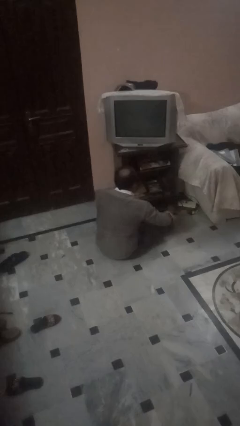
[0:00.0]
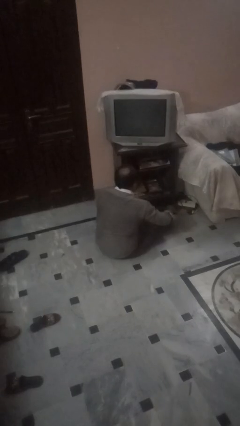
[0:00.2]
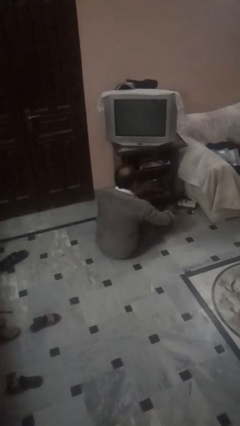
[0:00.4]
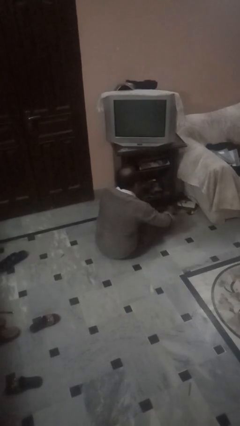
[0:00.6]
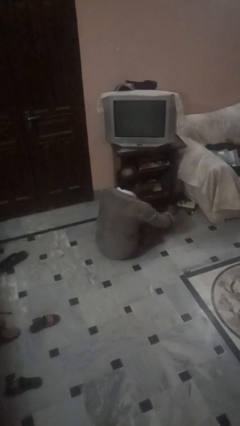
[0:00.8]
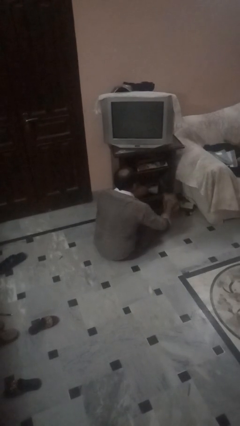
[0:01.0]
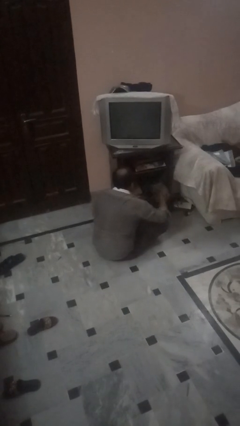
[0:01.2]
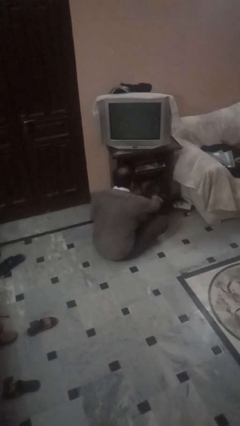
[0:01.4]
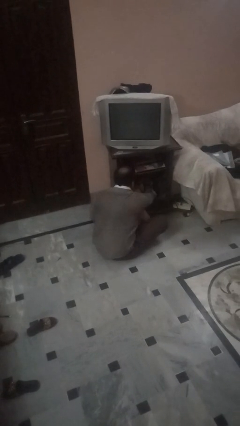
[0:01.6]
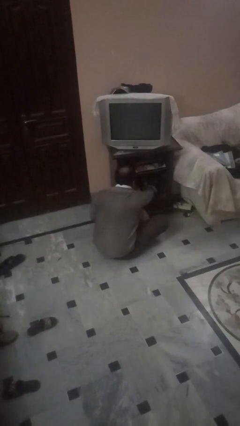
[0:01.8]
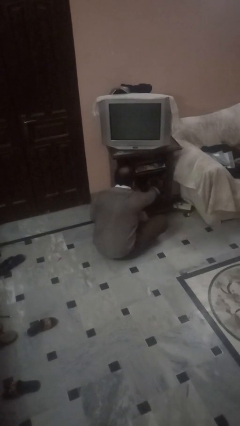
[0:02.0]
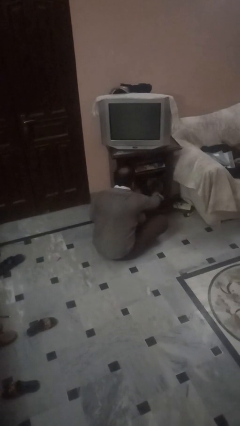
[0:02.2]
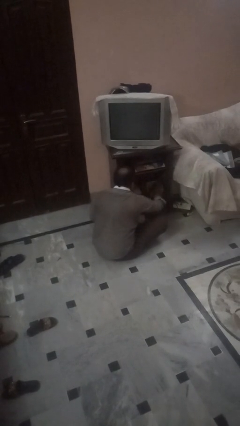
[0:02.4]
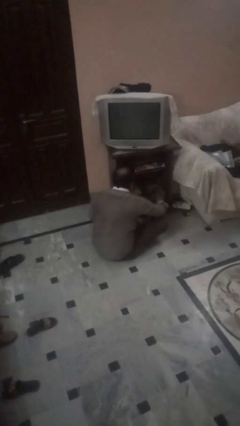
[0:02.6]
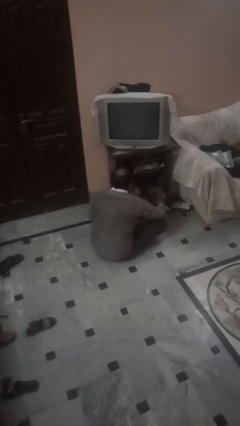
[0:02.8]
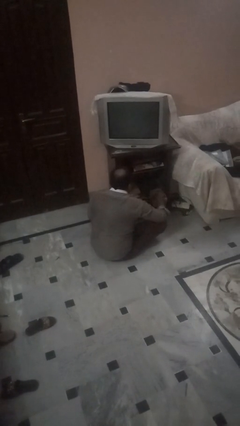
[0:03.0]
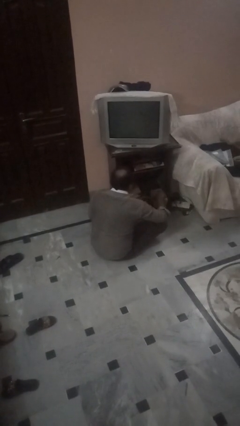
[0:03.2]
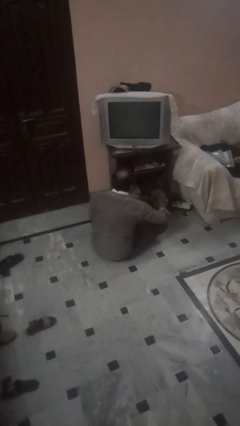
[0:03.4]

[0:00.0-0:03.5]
person dusts furniture

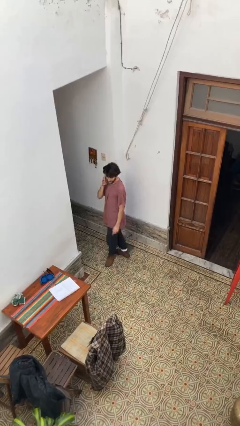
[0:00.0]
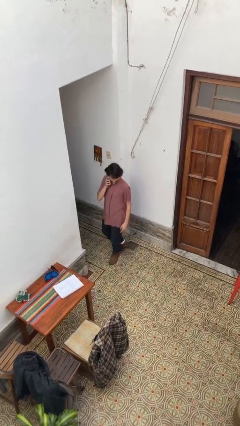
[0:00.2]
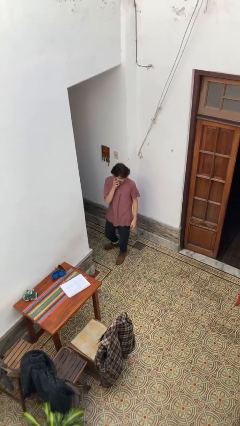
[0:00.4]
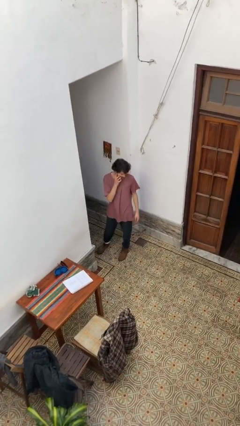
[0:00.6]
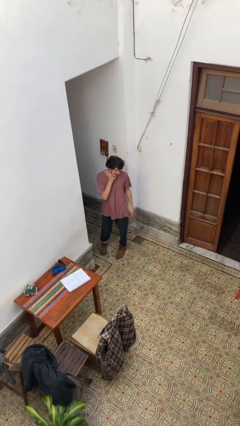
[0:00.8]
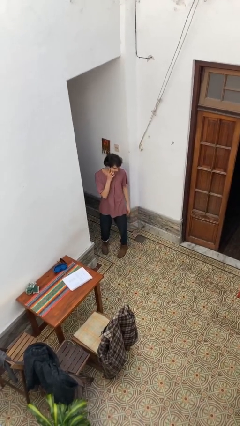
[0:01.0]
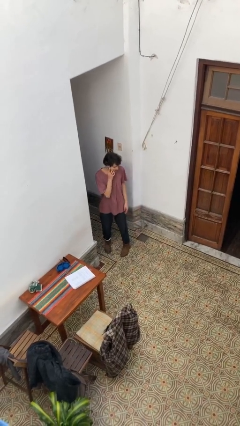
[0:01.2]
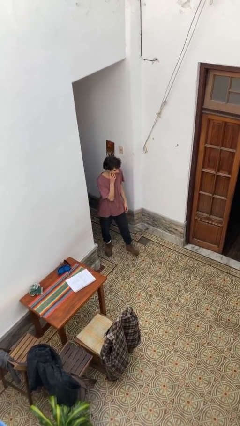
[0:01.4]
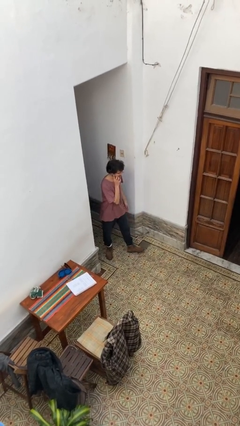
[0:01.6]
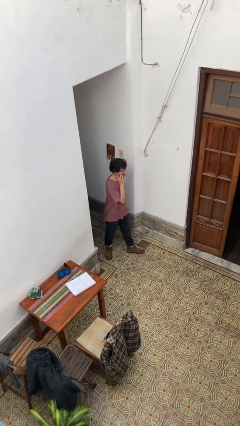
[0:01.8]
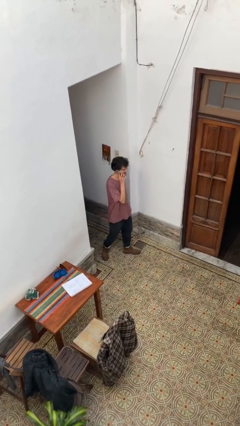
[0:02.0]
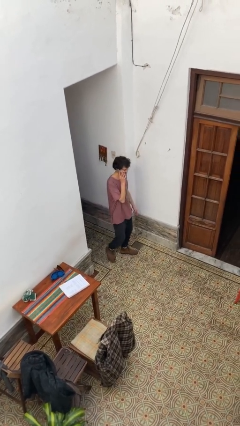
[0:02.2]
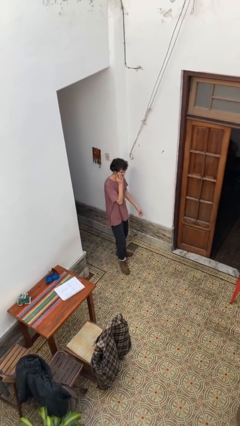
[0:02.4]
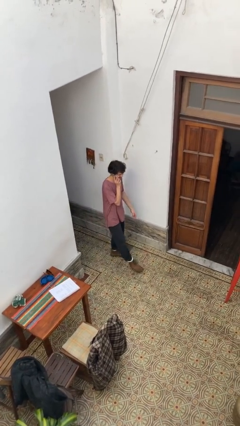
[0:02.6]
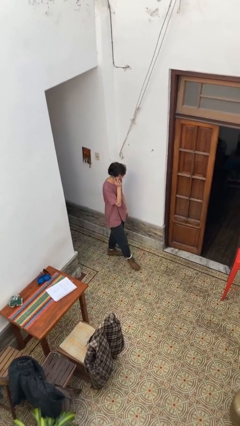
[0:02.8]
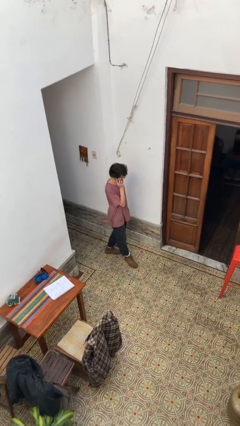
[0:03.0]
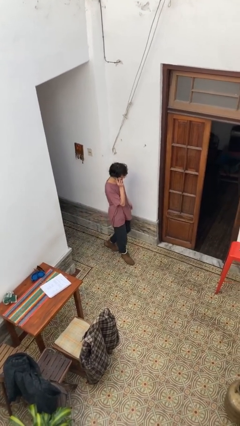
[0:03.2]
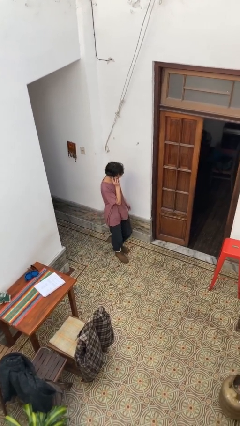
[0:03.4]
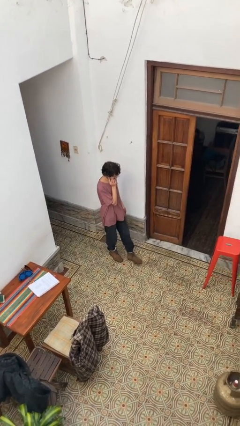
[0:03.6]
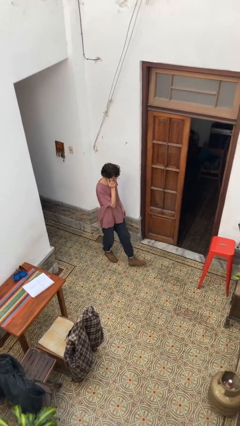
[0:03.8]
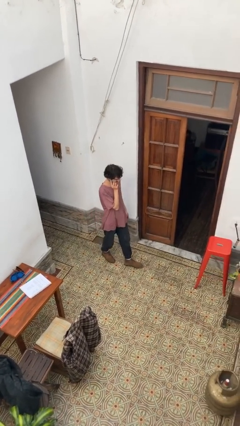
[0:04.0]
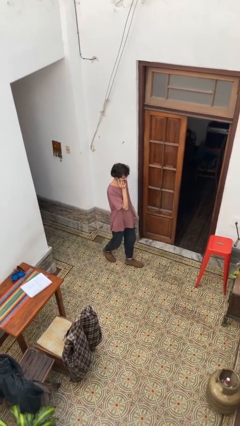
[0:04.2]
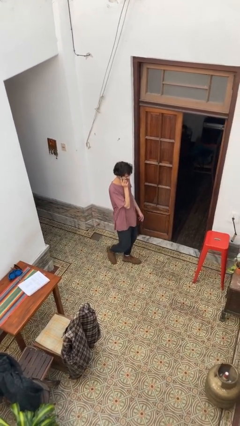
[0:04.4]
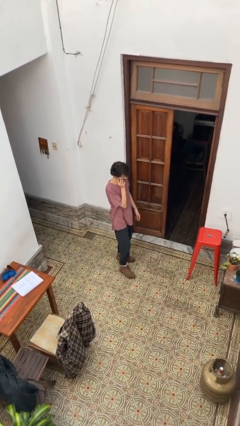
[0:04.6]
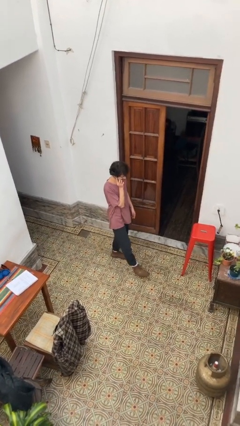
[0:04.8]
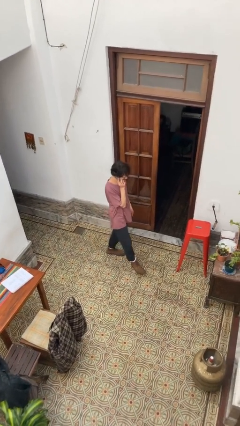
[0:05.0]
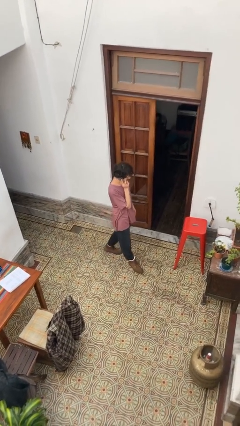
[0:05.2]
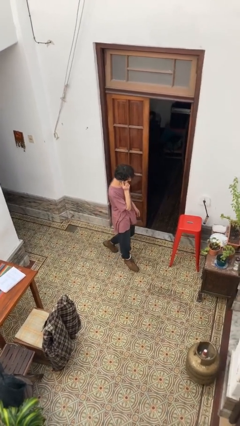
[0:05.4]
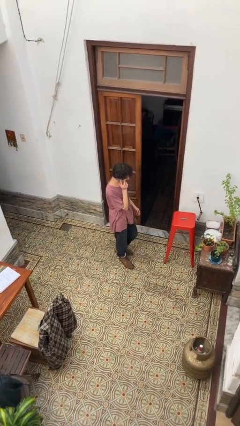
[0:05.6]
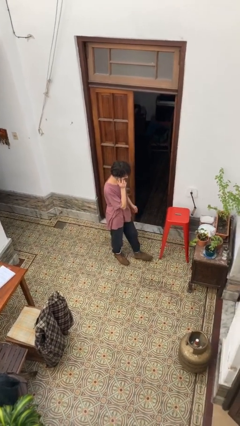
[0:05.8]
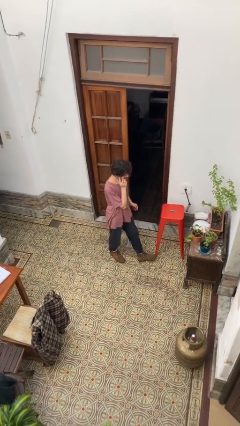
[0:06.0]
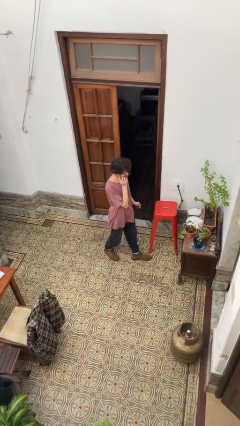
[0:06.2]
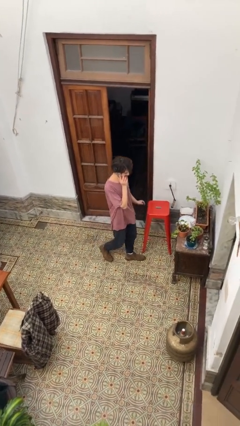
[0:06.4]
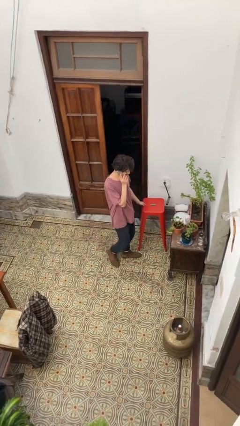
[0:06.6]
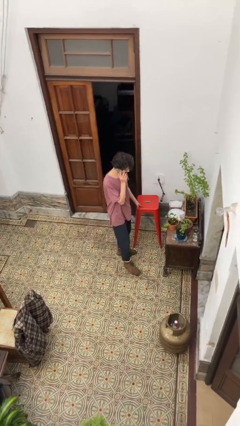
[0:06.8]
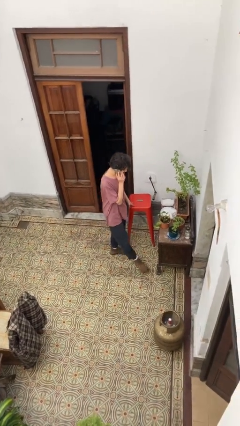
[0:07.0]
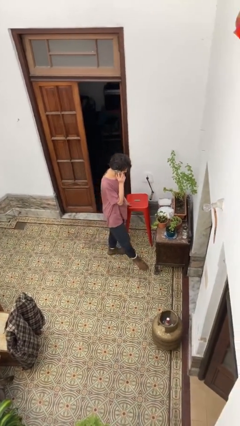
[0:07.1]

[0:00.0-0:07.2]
person talks on phone

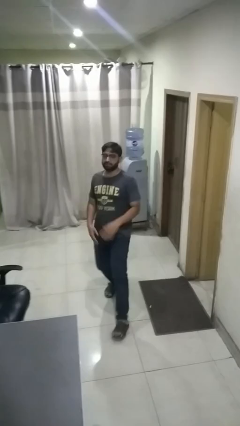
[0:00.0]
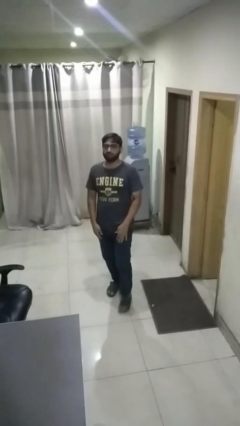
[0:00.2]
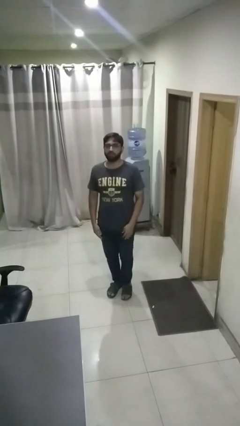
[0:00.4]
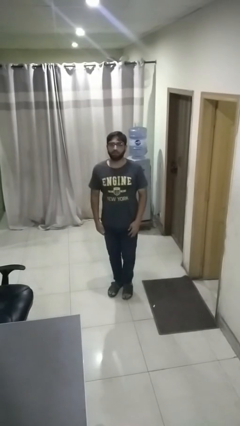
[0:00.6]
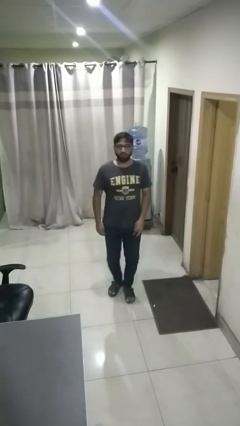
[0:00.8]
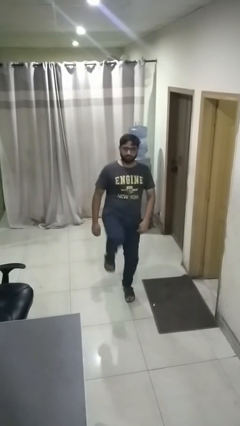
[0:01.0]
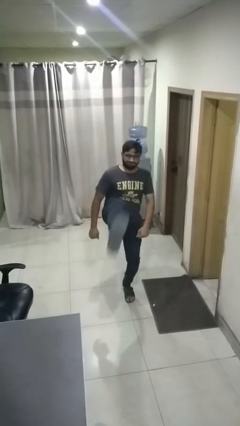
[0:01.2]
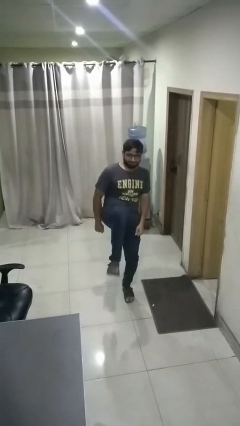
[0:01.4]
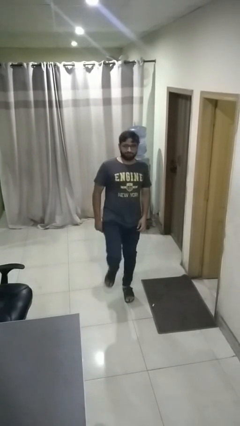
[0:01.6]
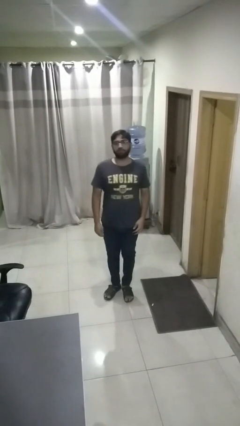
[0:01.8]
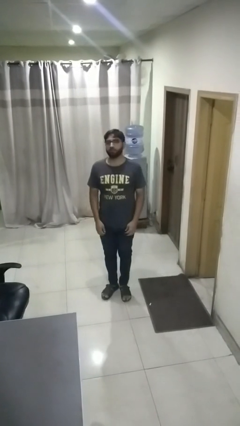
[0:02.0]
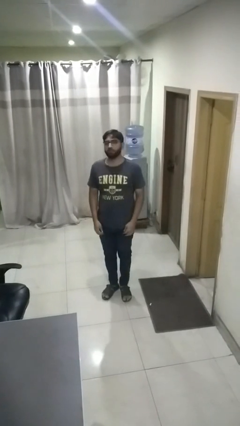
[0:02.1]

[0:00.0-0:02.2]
person karate kicks

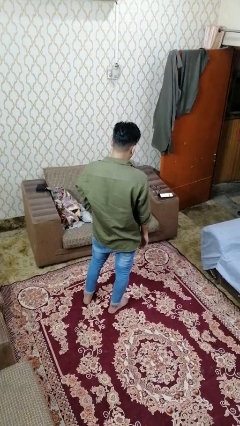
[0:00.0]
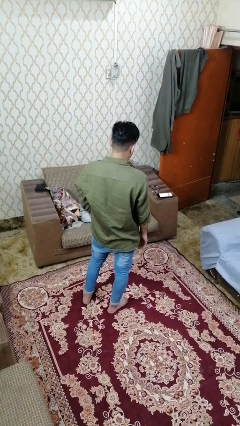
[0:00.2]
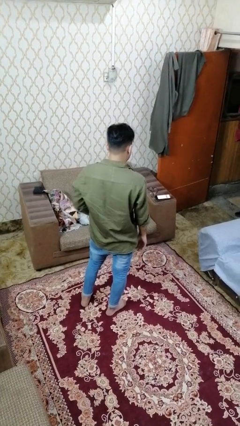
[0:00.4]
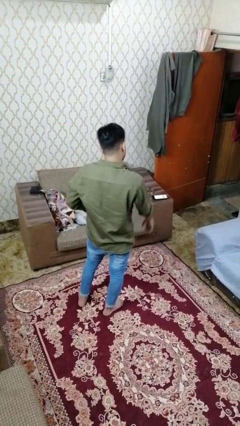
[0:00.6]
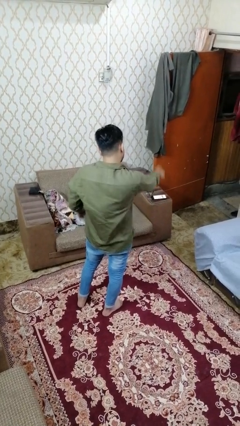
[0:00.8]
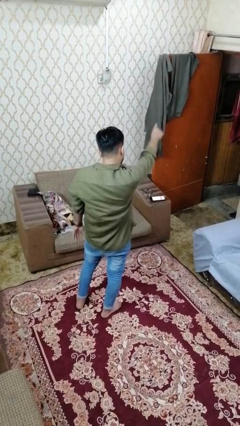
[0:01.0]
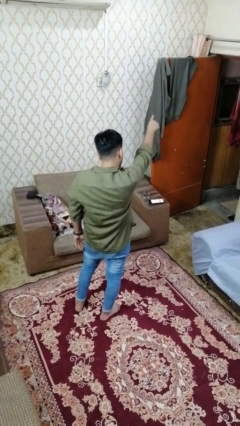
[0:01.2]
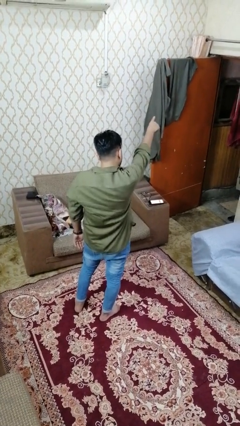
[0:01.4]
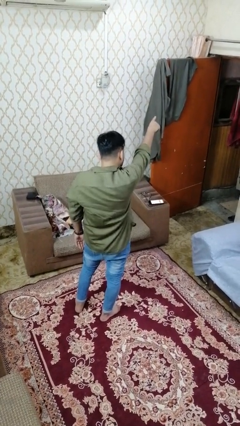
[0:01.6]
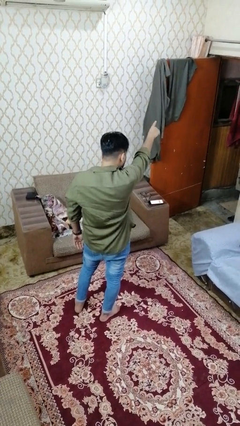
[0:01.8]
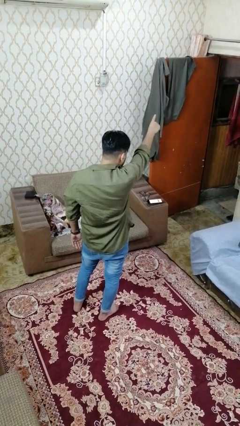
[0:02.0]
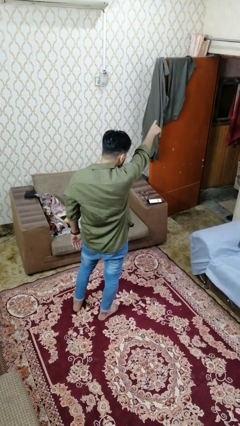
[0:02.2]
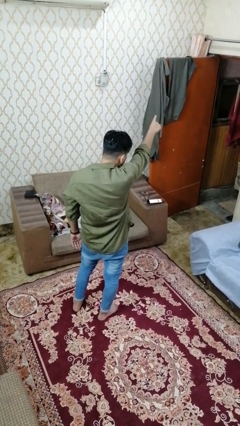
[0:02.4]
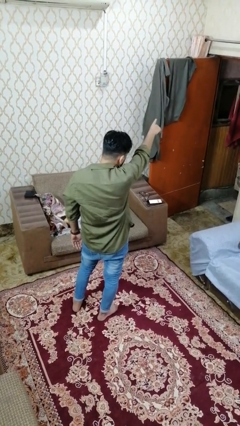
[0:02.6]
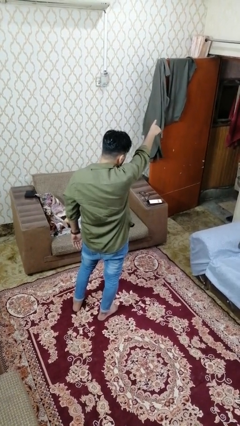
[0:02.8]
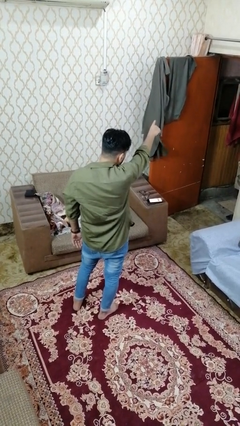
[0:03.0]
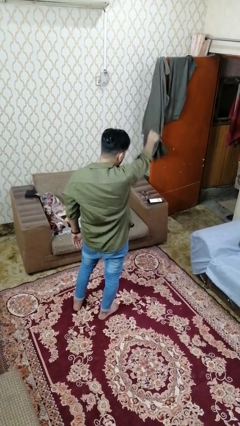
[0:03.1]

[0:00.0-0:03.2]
person points at person

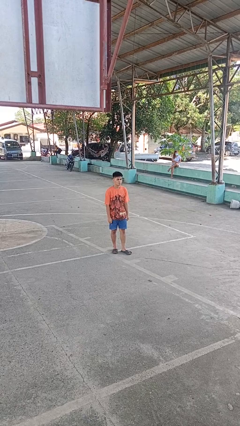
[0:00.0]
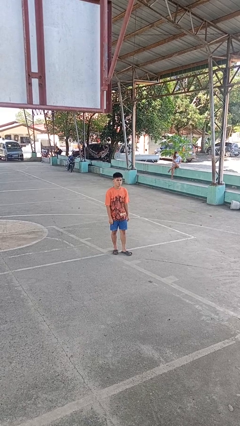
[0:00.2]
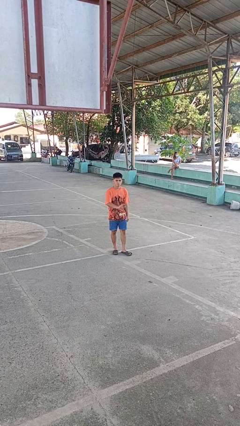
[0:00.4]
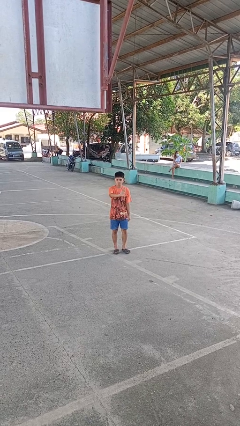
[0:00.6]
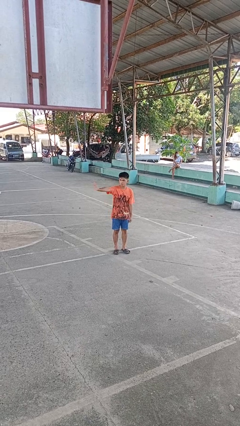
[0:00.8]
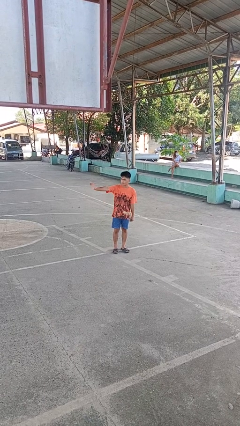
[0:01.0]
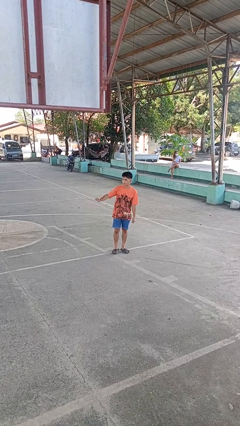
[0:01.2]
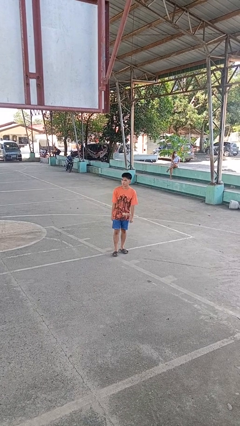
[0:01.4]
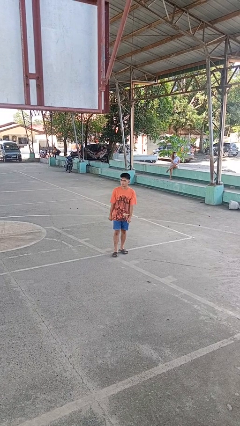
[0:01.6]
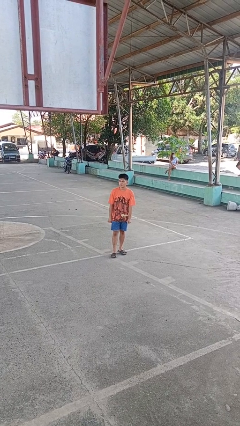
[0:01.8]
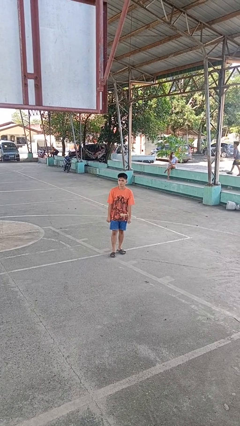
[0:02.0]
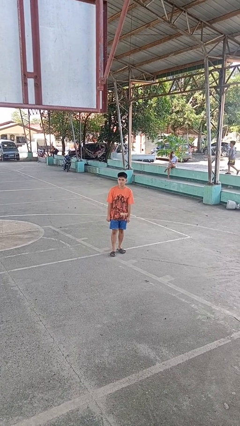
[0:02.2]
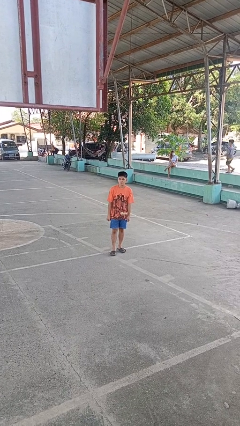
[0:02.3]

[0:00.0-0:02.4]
person gestures swipe right
